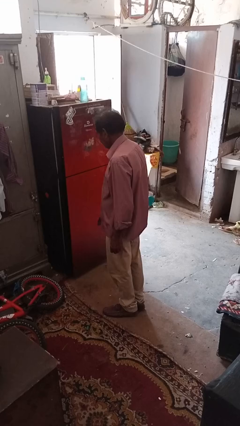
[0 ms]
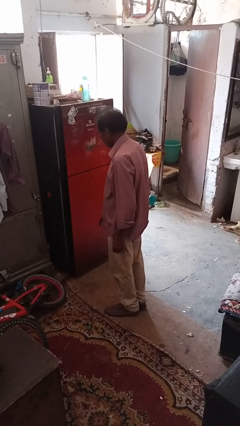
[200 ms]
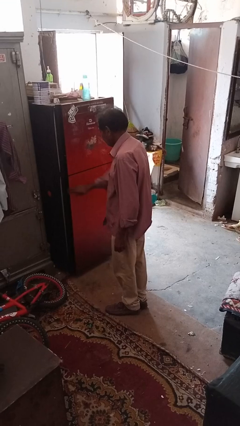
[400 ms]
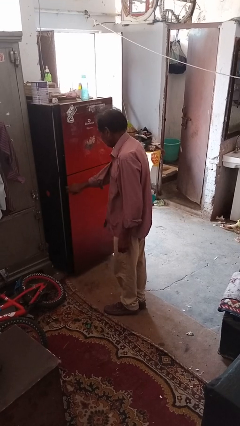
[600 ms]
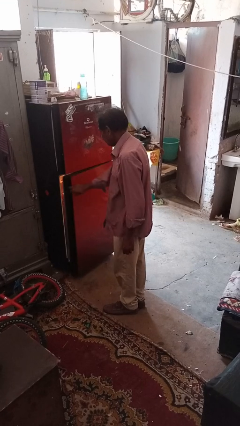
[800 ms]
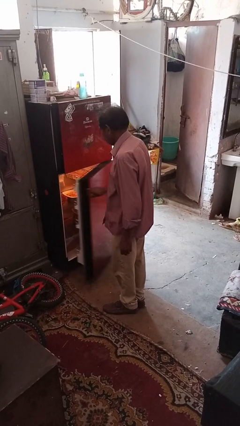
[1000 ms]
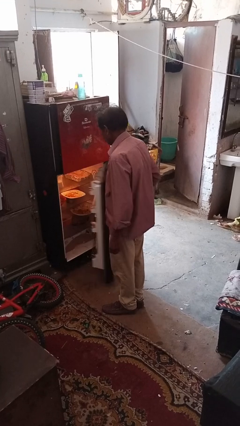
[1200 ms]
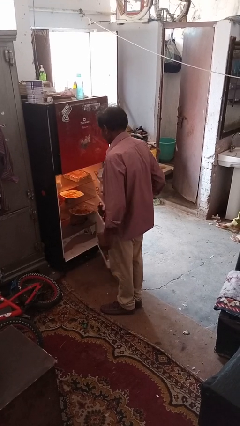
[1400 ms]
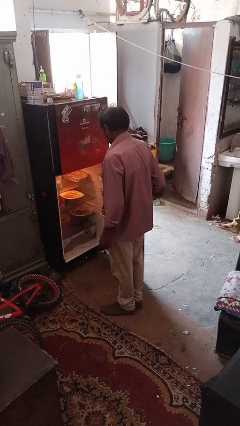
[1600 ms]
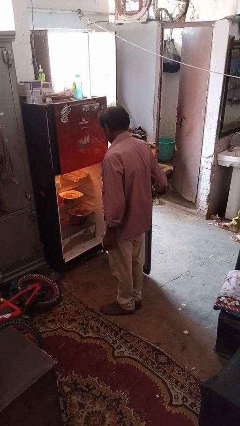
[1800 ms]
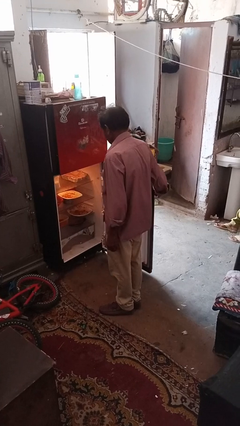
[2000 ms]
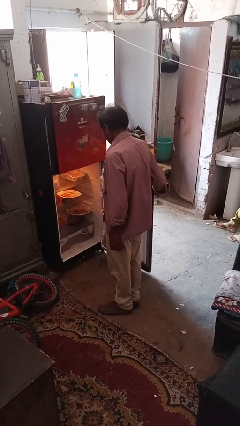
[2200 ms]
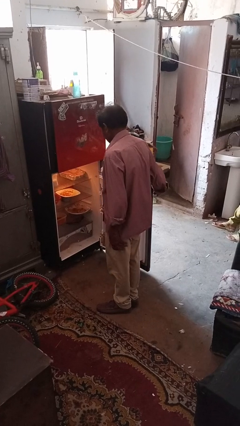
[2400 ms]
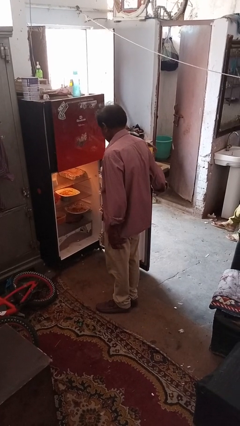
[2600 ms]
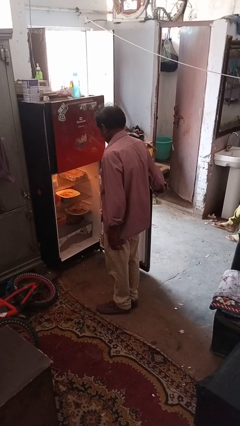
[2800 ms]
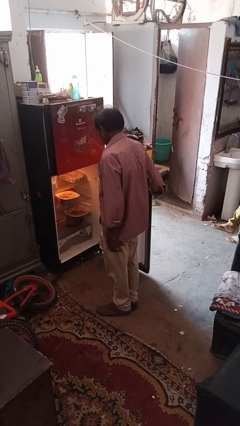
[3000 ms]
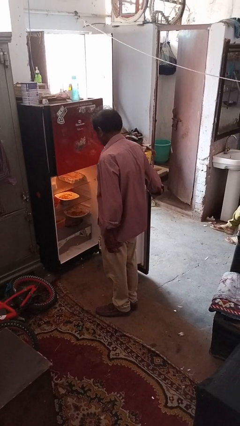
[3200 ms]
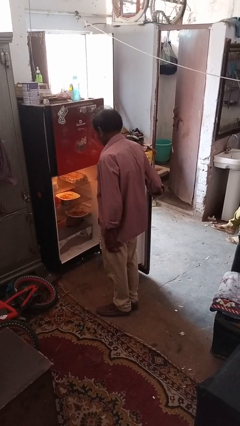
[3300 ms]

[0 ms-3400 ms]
person opens refrigerator

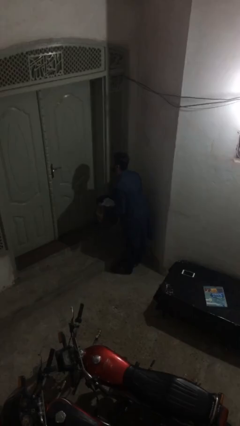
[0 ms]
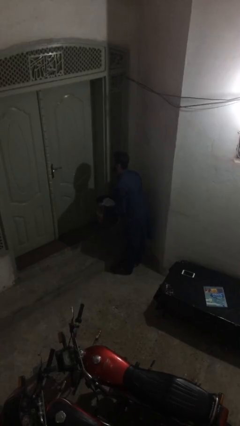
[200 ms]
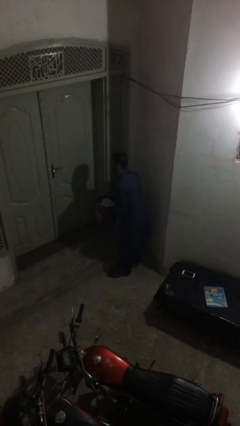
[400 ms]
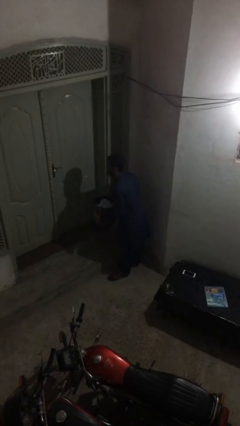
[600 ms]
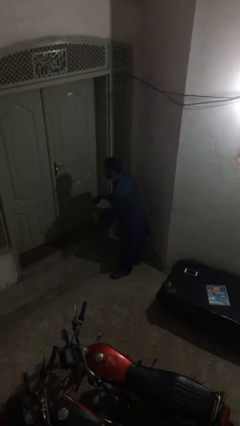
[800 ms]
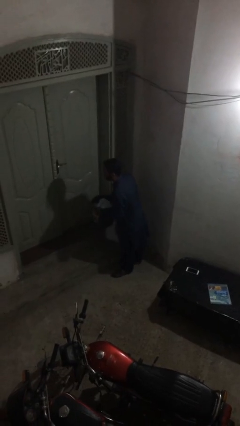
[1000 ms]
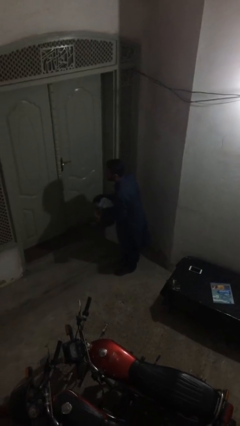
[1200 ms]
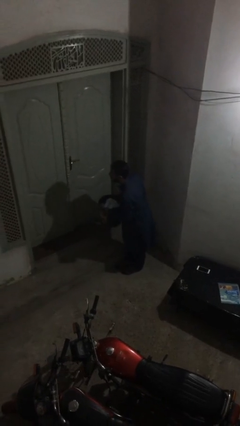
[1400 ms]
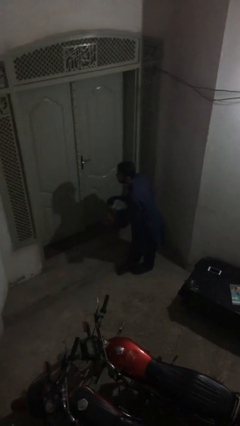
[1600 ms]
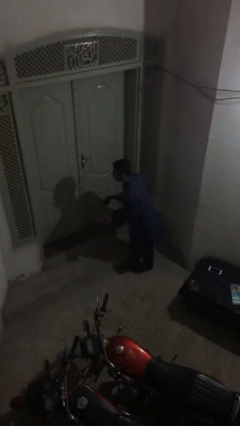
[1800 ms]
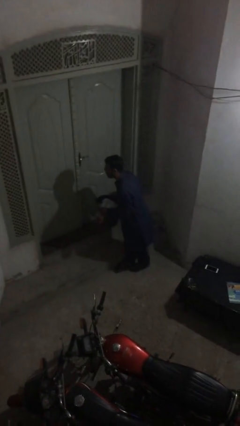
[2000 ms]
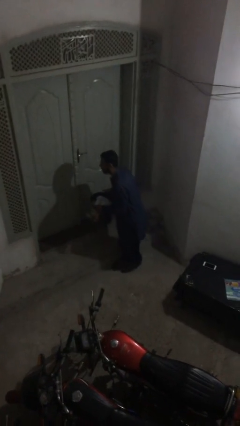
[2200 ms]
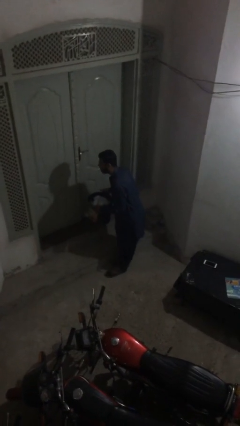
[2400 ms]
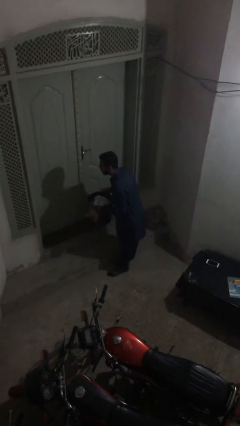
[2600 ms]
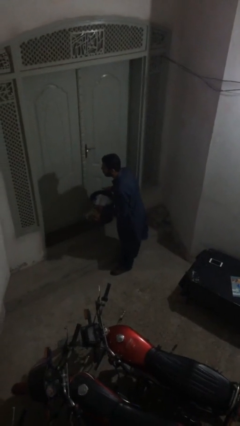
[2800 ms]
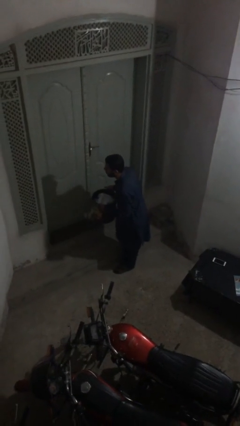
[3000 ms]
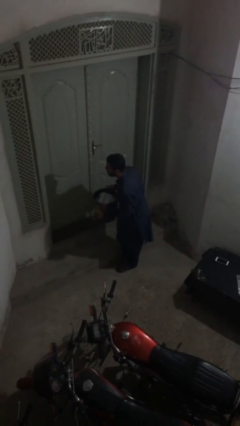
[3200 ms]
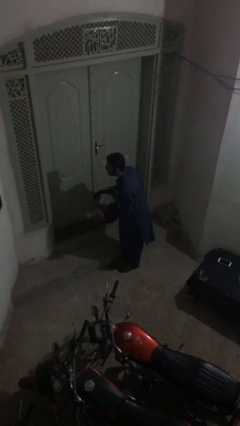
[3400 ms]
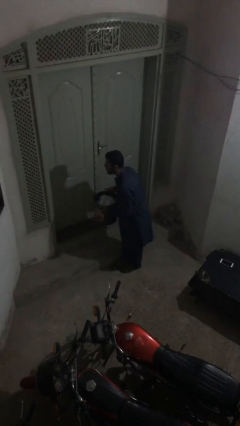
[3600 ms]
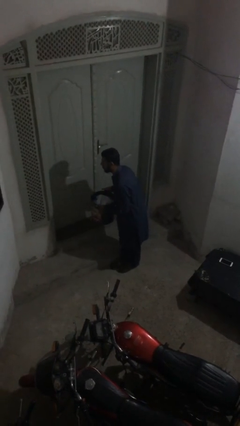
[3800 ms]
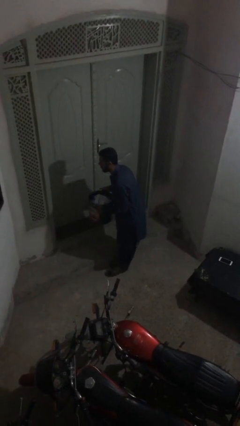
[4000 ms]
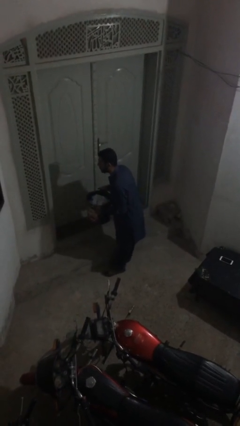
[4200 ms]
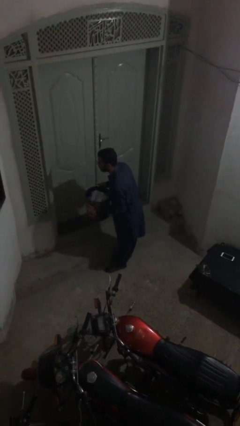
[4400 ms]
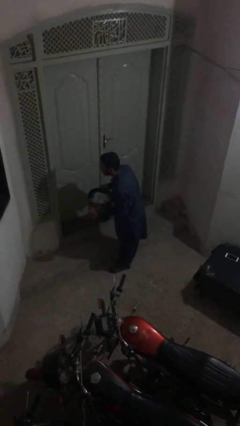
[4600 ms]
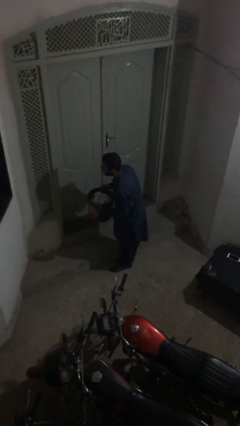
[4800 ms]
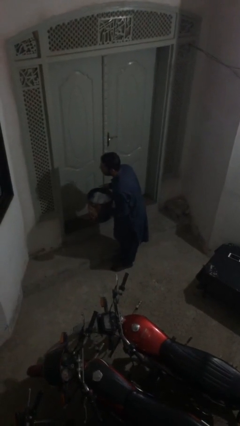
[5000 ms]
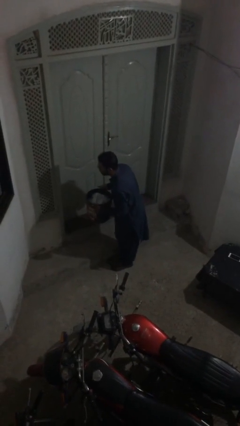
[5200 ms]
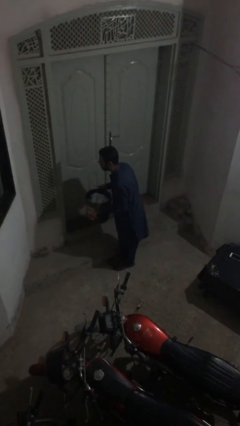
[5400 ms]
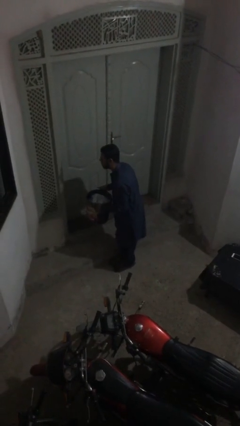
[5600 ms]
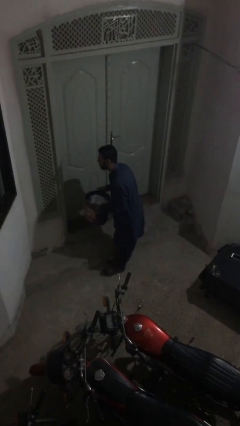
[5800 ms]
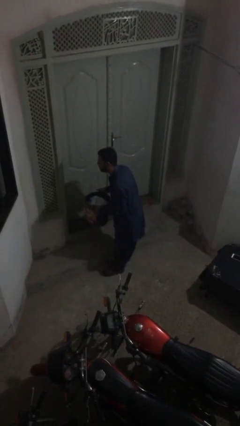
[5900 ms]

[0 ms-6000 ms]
person reads document

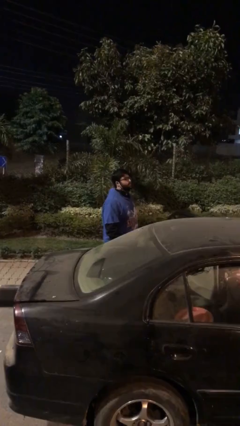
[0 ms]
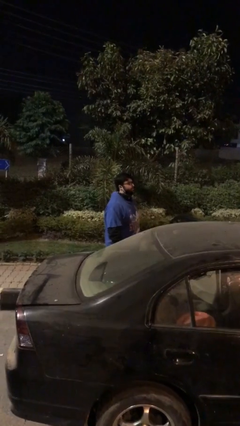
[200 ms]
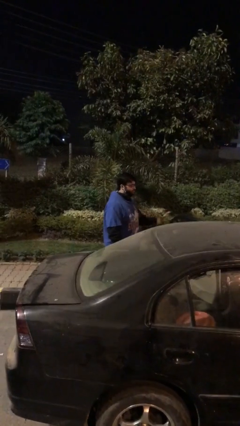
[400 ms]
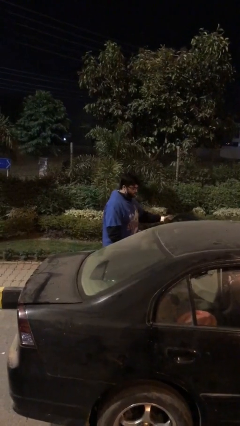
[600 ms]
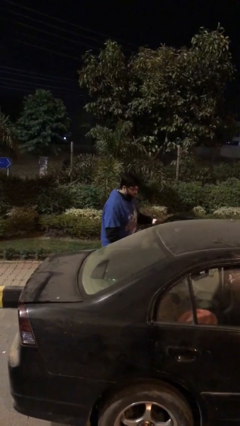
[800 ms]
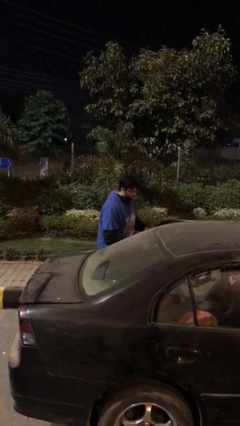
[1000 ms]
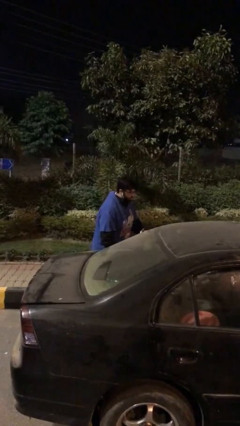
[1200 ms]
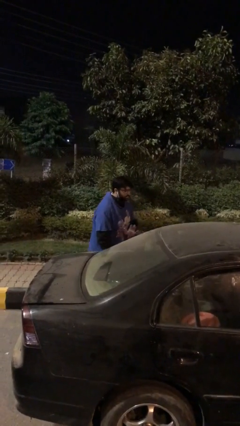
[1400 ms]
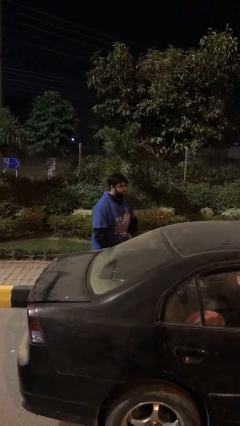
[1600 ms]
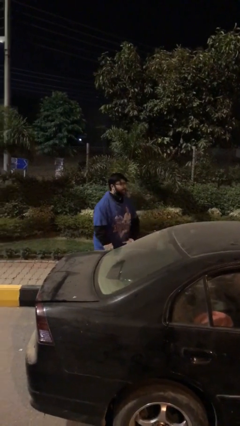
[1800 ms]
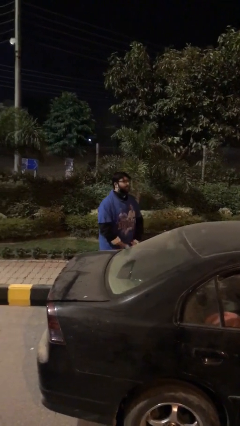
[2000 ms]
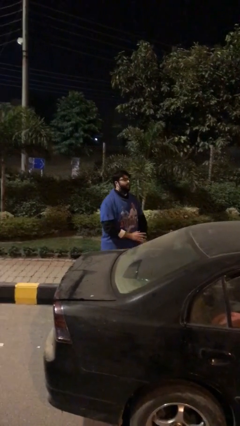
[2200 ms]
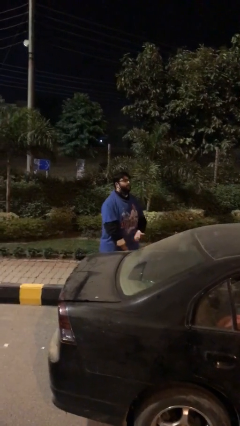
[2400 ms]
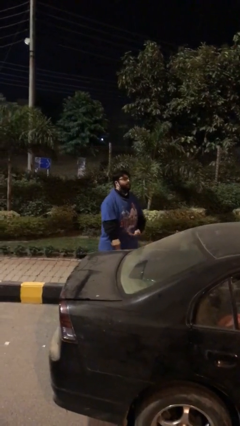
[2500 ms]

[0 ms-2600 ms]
person closes car door

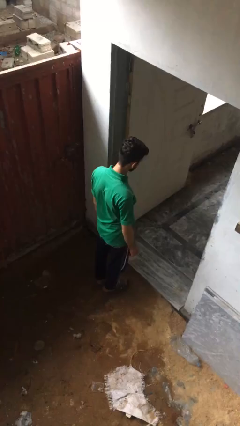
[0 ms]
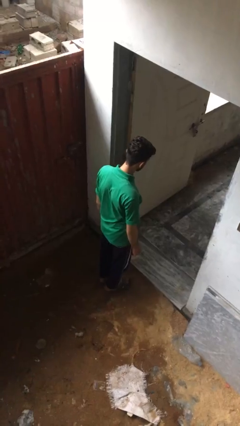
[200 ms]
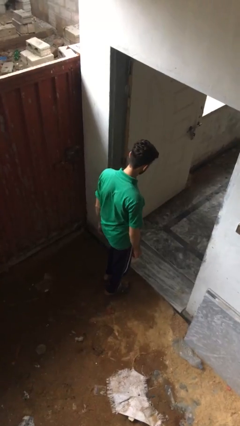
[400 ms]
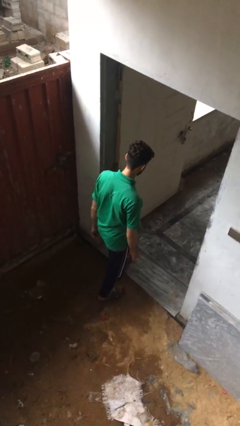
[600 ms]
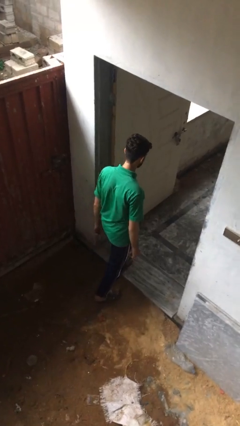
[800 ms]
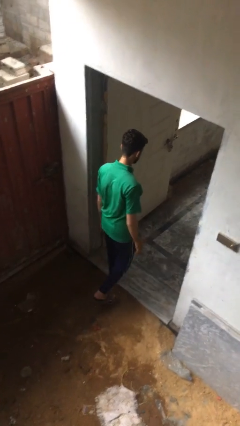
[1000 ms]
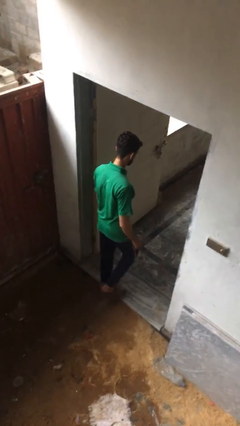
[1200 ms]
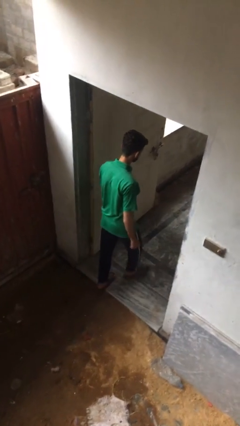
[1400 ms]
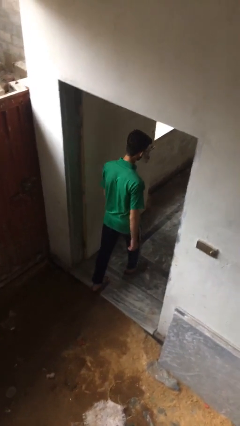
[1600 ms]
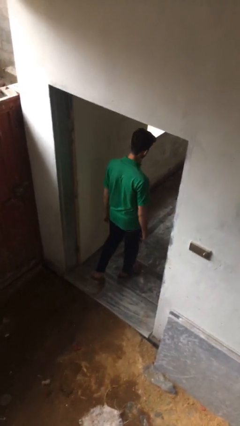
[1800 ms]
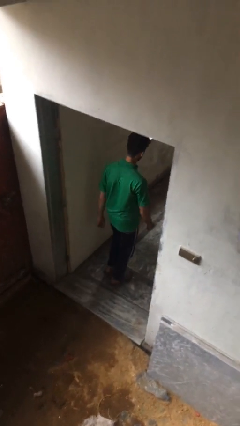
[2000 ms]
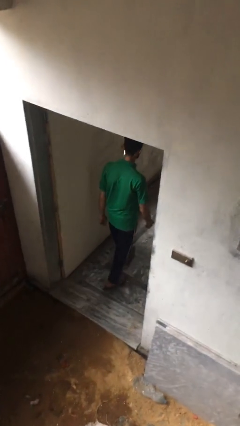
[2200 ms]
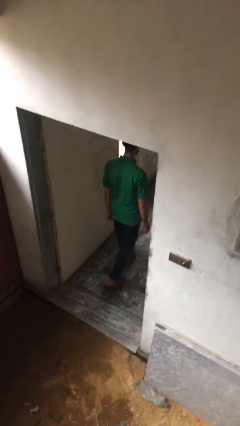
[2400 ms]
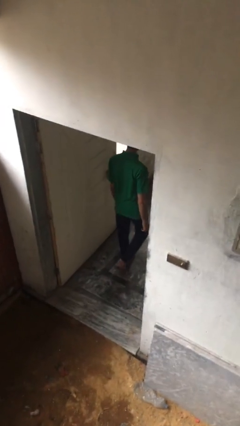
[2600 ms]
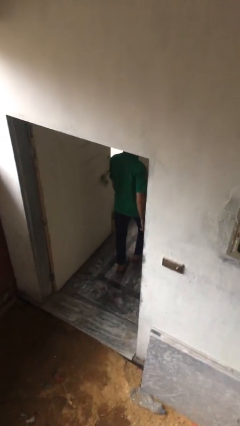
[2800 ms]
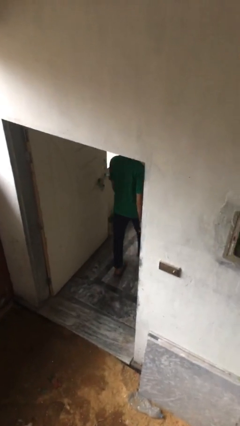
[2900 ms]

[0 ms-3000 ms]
person exits scene through structure

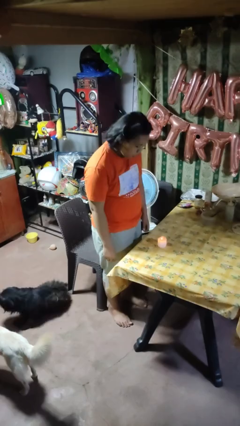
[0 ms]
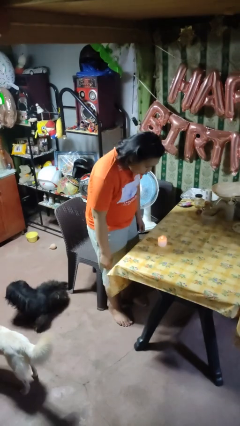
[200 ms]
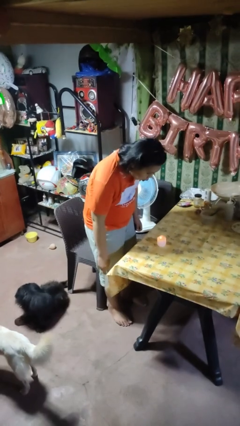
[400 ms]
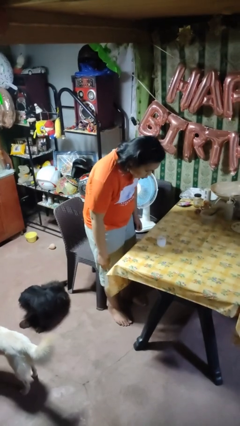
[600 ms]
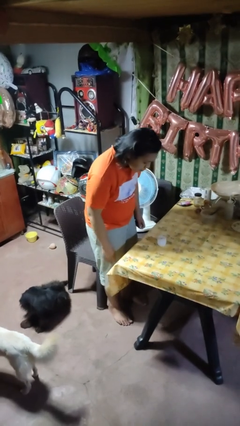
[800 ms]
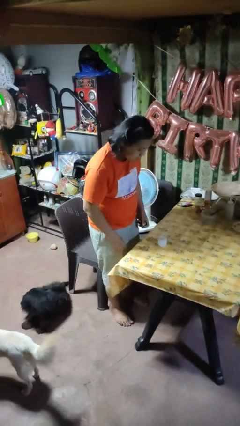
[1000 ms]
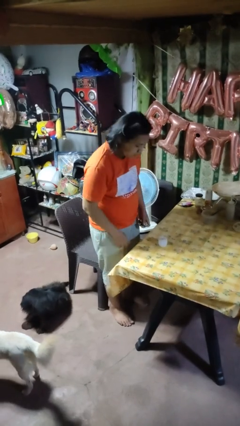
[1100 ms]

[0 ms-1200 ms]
person extinguishes candle

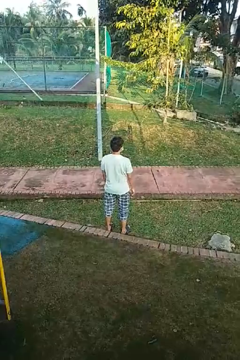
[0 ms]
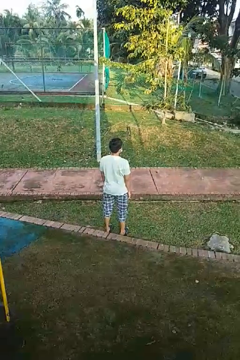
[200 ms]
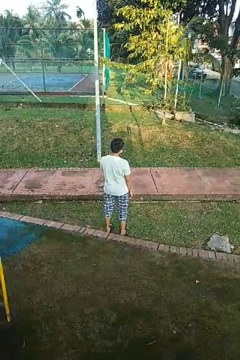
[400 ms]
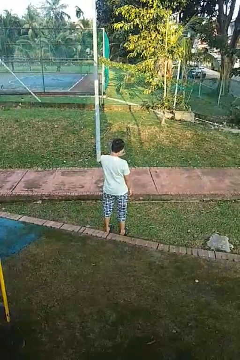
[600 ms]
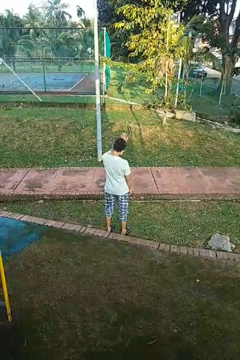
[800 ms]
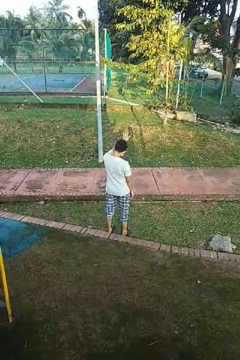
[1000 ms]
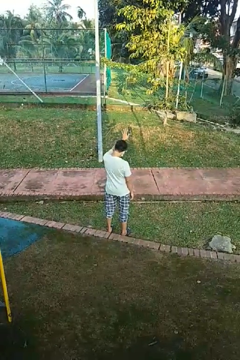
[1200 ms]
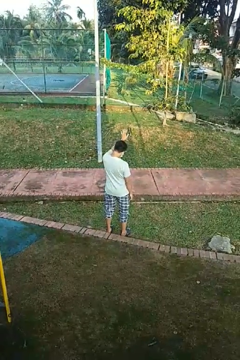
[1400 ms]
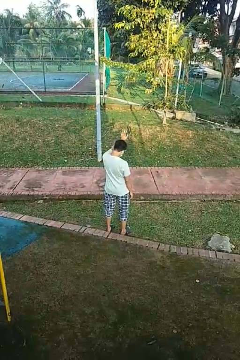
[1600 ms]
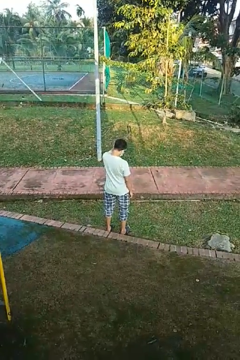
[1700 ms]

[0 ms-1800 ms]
person gestures stop
